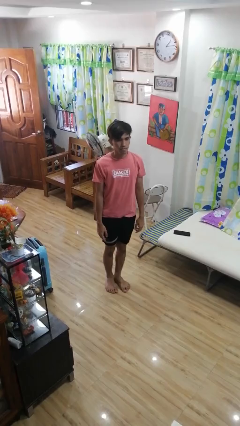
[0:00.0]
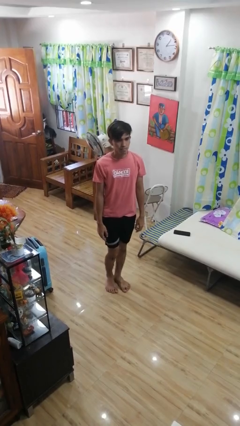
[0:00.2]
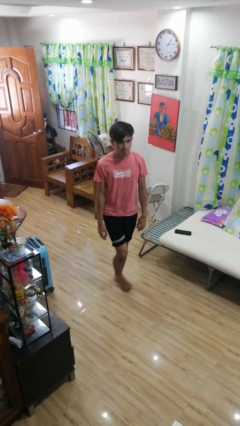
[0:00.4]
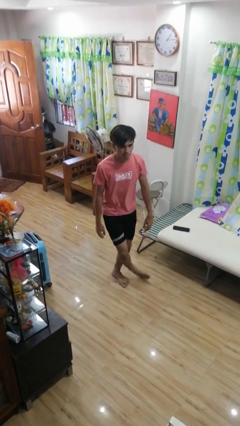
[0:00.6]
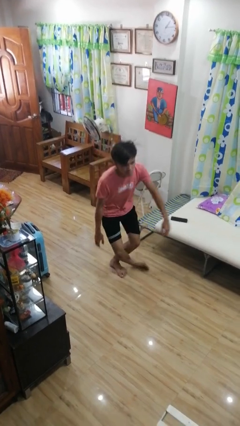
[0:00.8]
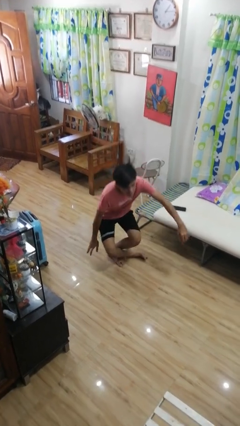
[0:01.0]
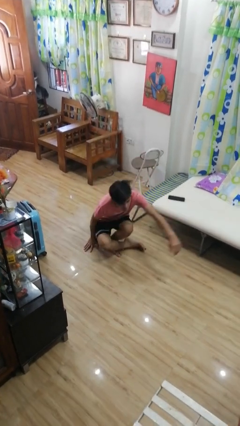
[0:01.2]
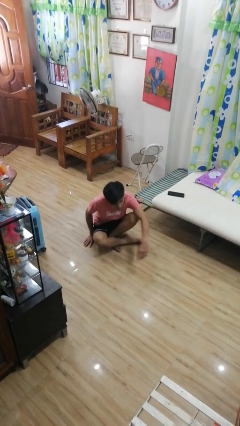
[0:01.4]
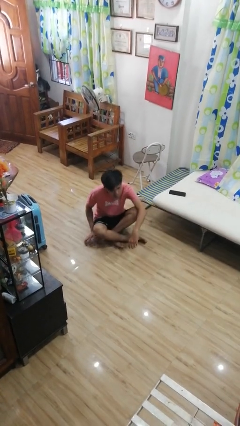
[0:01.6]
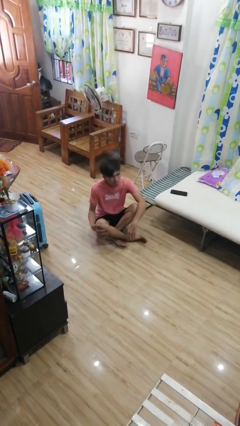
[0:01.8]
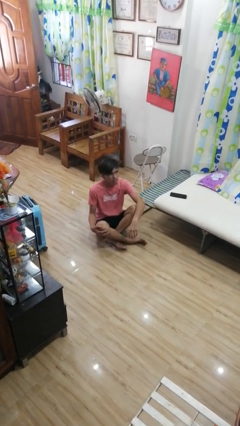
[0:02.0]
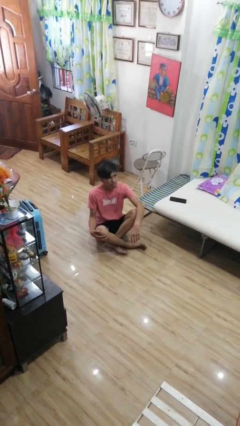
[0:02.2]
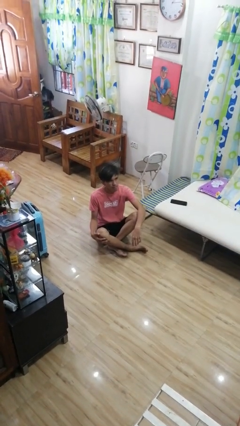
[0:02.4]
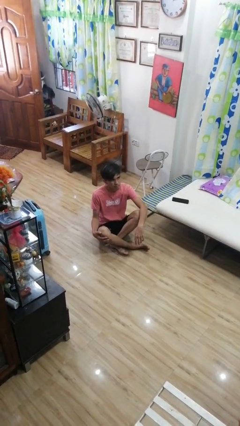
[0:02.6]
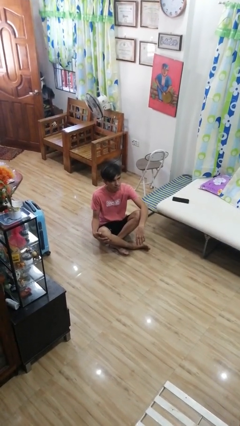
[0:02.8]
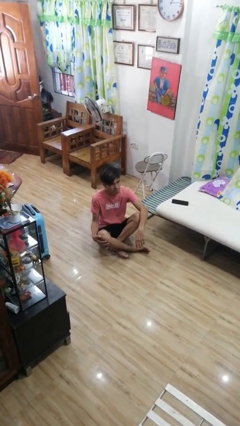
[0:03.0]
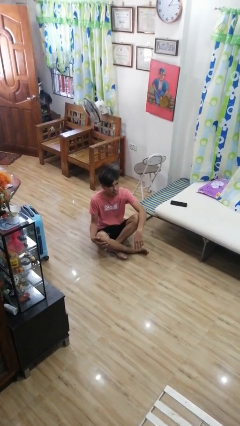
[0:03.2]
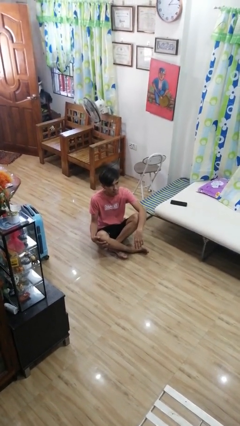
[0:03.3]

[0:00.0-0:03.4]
person sits crisscross

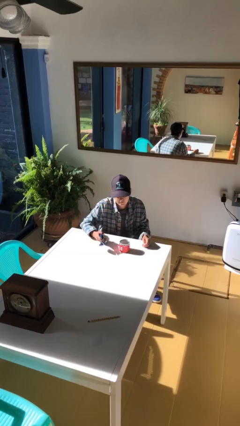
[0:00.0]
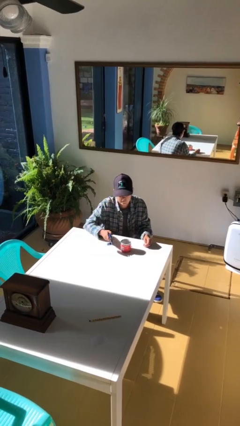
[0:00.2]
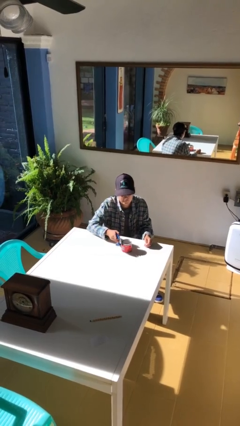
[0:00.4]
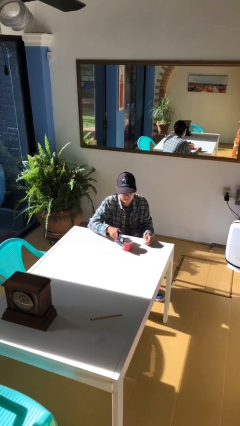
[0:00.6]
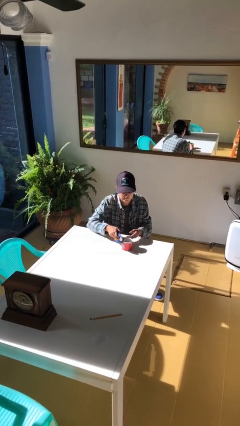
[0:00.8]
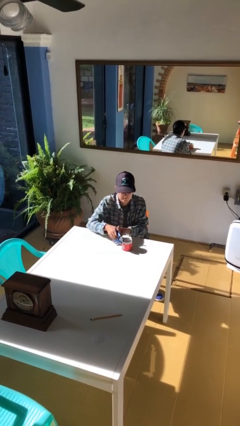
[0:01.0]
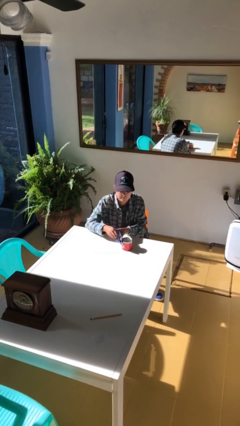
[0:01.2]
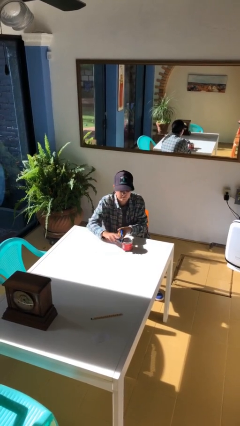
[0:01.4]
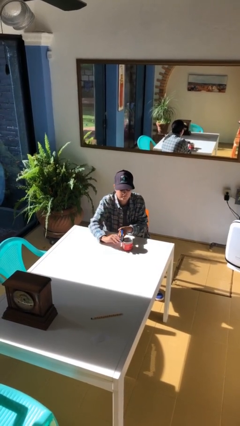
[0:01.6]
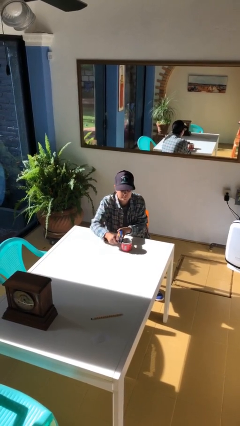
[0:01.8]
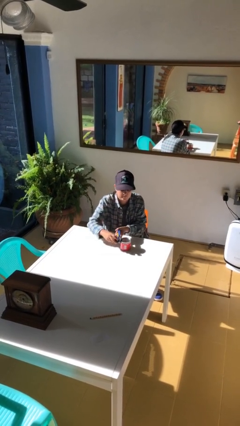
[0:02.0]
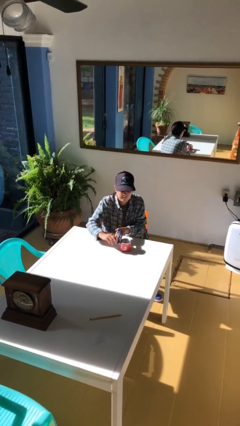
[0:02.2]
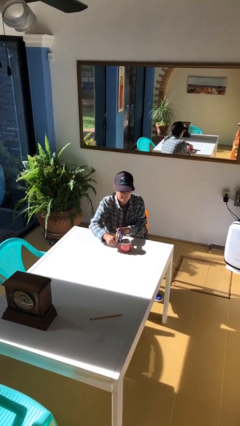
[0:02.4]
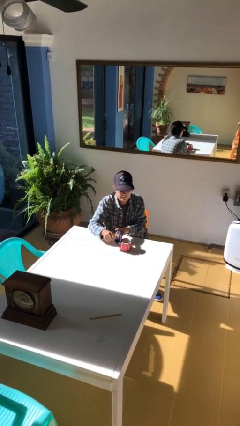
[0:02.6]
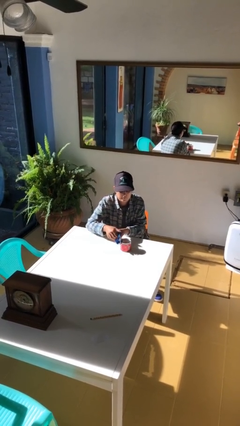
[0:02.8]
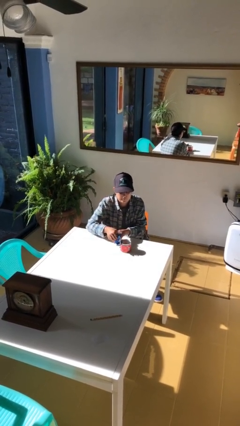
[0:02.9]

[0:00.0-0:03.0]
person opens can with can opener

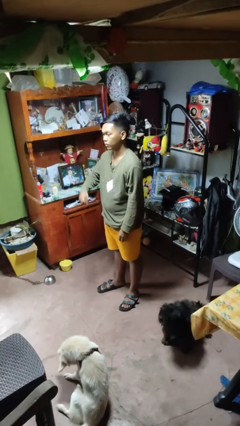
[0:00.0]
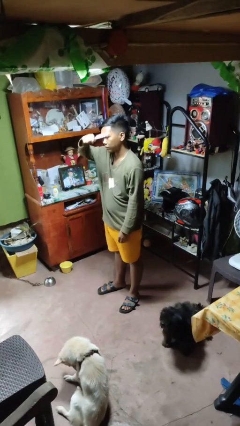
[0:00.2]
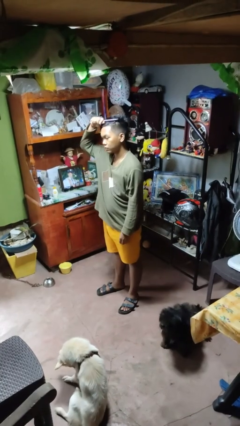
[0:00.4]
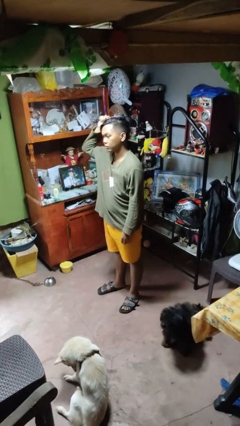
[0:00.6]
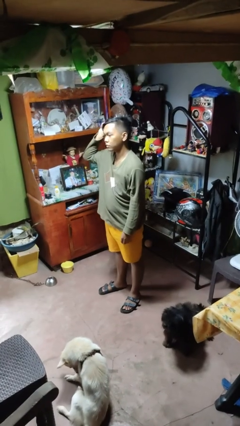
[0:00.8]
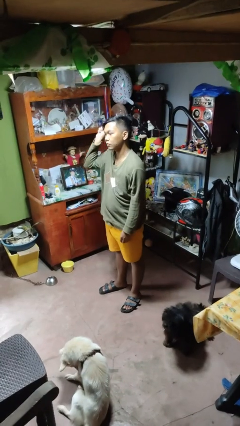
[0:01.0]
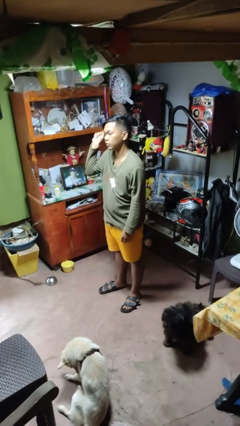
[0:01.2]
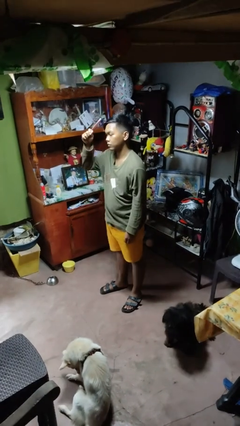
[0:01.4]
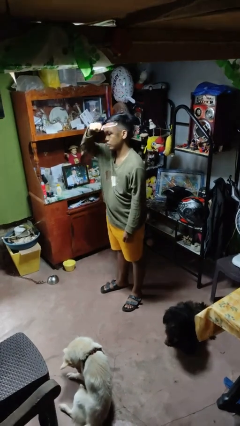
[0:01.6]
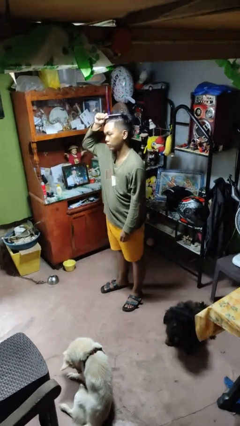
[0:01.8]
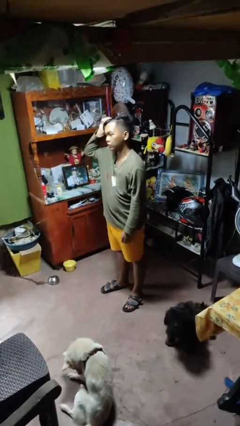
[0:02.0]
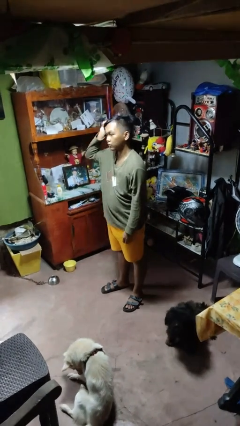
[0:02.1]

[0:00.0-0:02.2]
person brushes hair

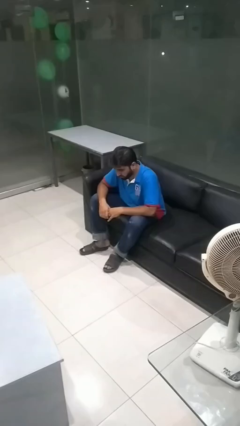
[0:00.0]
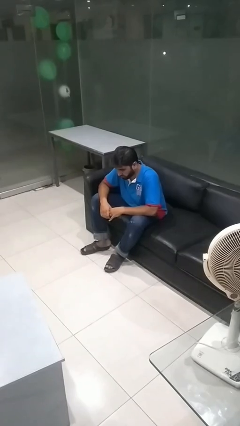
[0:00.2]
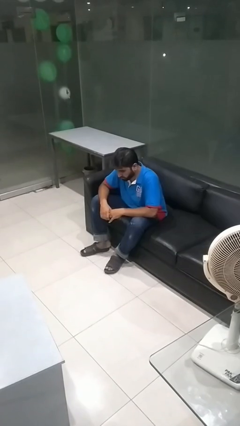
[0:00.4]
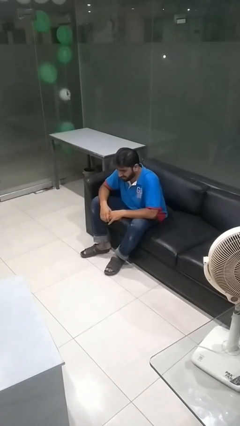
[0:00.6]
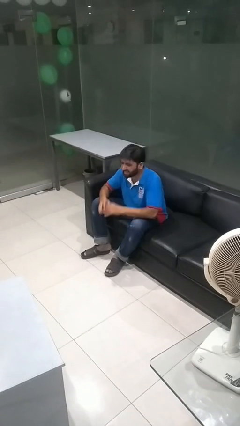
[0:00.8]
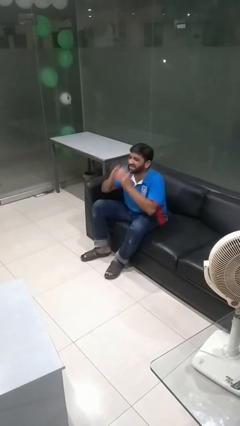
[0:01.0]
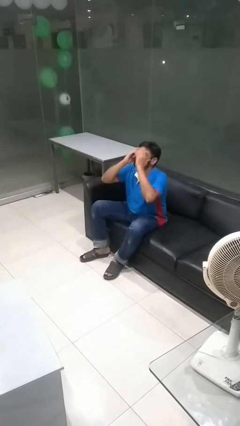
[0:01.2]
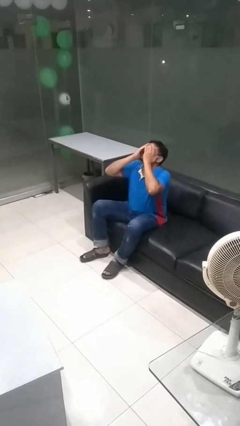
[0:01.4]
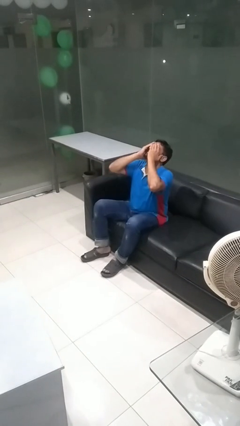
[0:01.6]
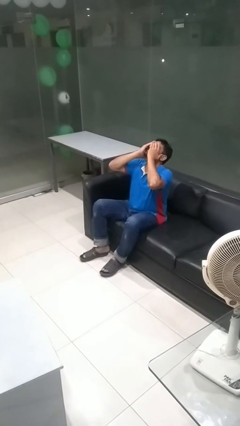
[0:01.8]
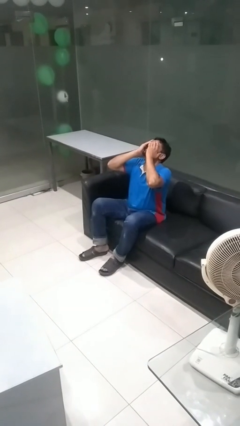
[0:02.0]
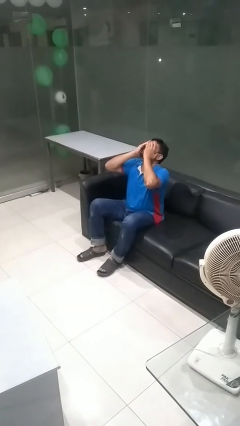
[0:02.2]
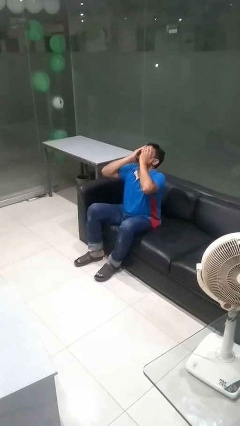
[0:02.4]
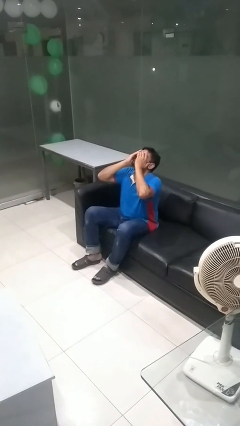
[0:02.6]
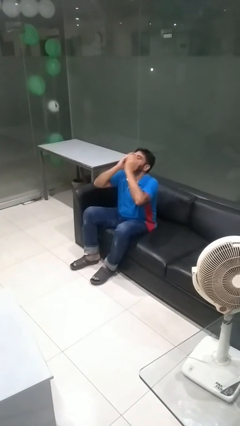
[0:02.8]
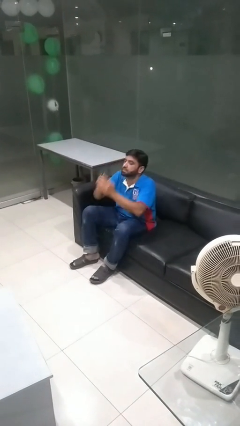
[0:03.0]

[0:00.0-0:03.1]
person covers face with hands

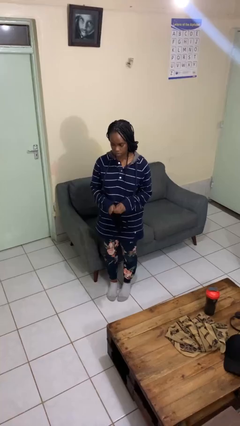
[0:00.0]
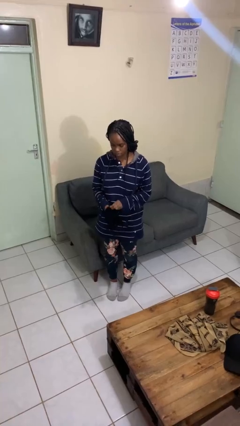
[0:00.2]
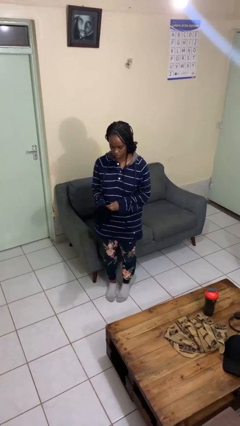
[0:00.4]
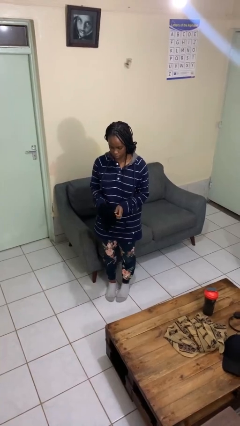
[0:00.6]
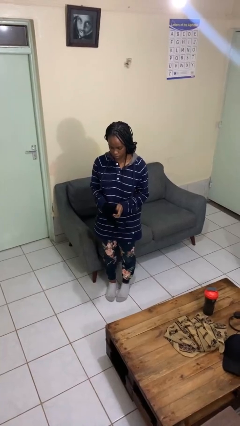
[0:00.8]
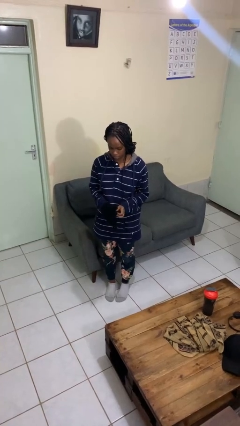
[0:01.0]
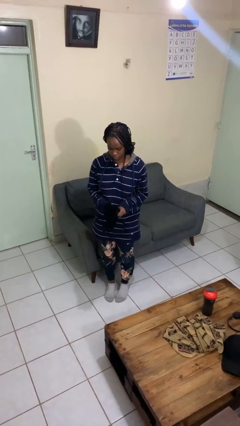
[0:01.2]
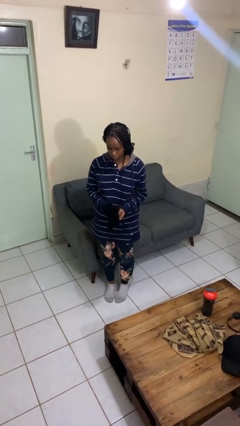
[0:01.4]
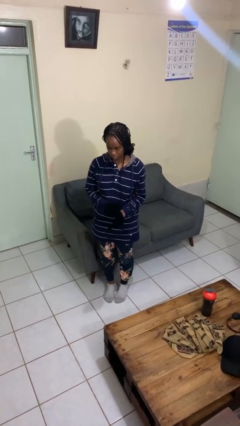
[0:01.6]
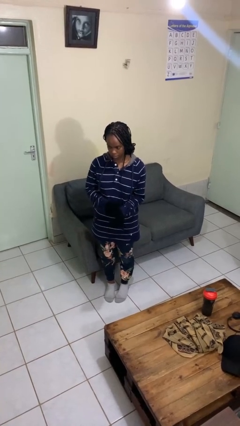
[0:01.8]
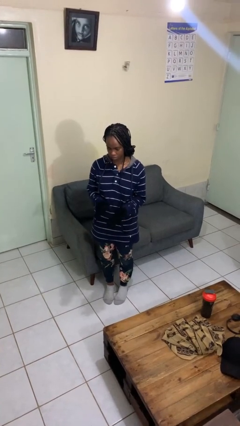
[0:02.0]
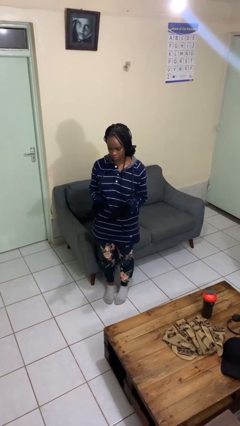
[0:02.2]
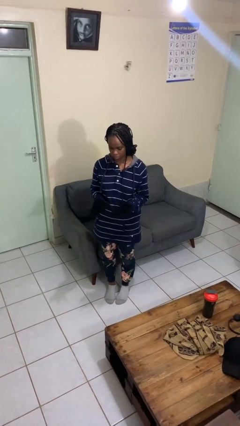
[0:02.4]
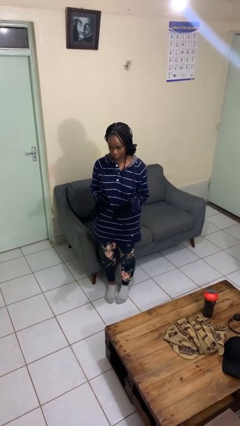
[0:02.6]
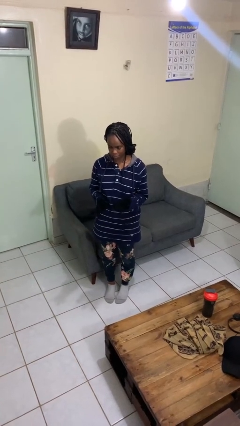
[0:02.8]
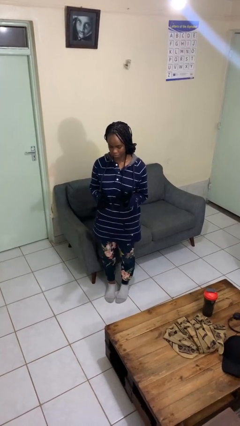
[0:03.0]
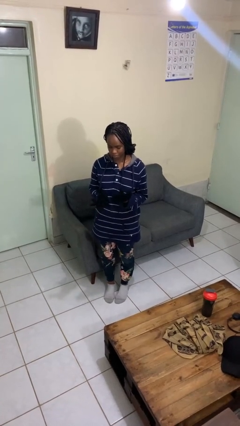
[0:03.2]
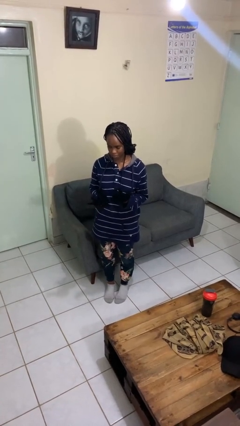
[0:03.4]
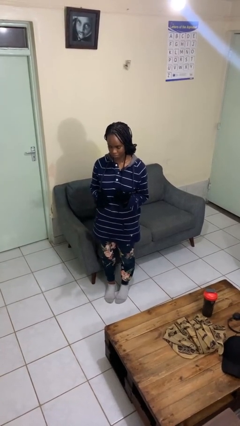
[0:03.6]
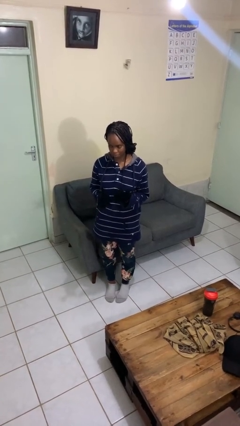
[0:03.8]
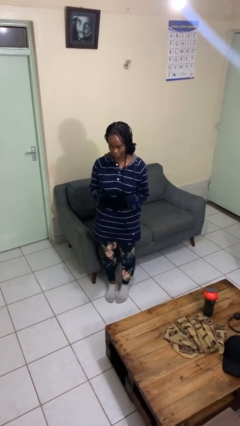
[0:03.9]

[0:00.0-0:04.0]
person puts on gloves

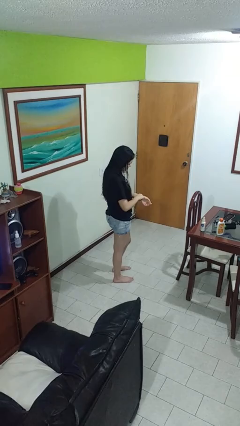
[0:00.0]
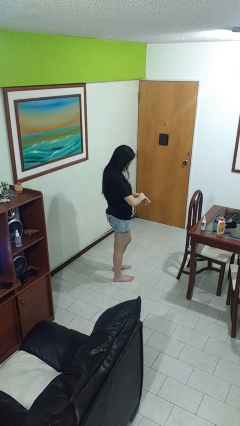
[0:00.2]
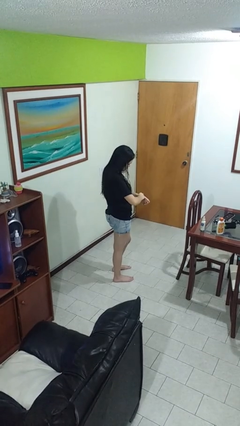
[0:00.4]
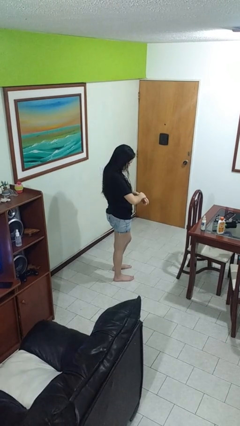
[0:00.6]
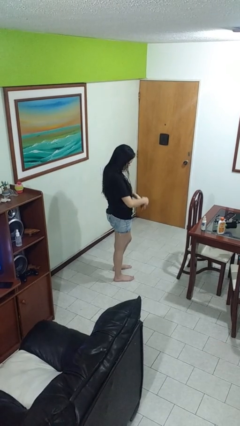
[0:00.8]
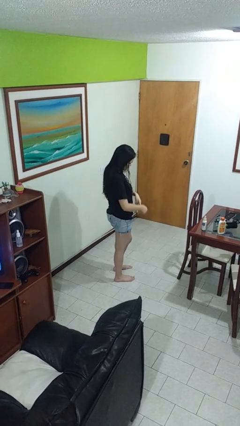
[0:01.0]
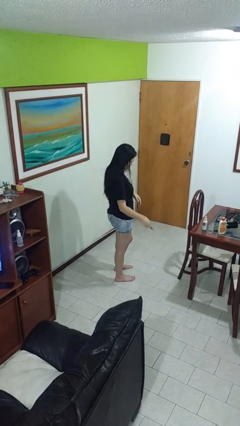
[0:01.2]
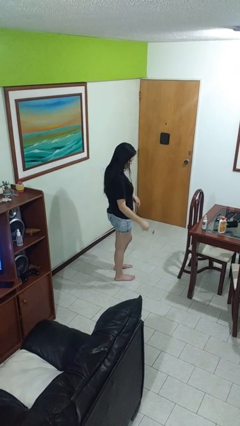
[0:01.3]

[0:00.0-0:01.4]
person takes off wristwatch

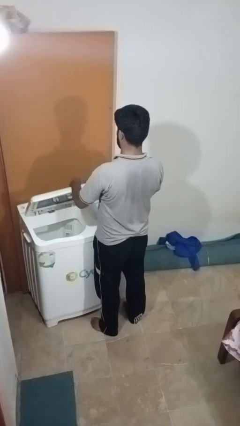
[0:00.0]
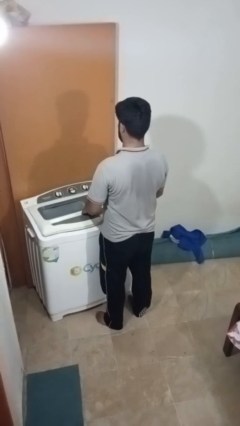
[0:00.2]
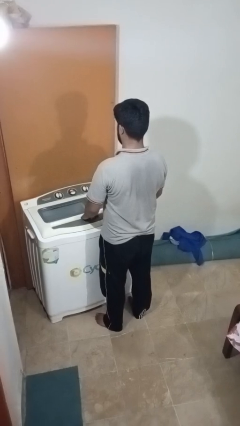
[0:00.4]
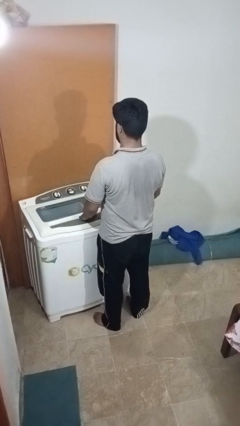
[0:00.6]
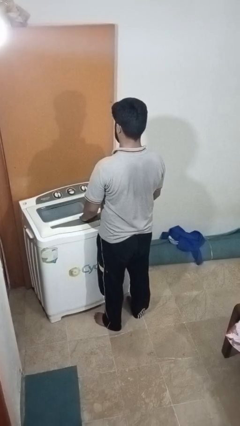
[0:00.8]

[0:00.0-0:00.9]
person closes clothes washer
